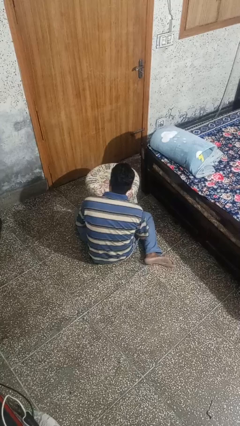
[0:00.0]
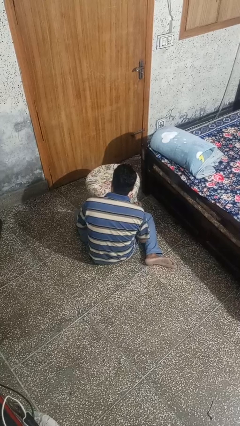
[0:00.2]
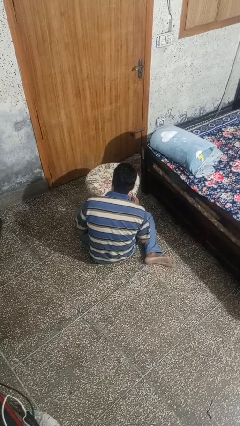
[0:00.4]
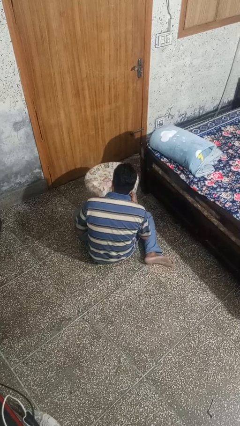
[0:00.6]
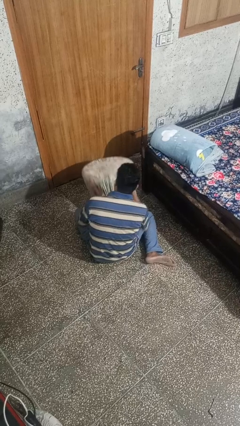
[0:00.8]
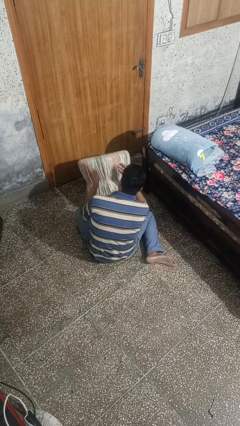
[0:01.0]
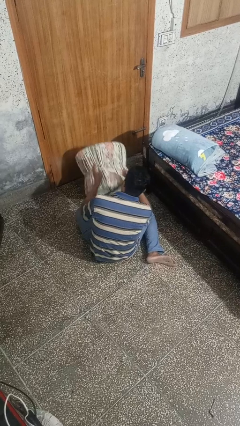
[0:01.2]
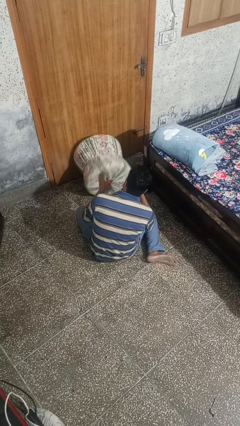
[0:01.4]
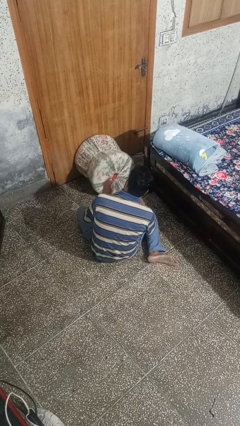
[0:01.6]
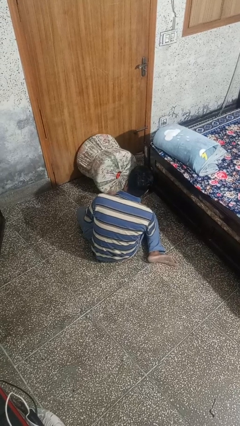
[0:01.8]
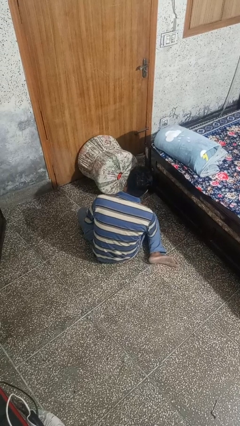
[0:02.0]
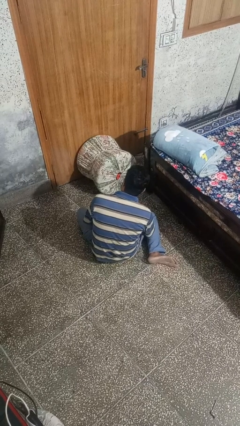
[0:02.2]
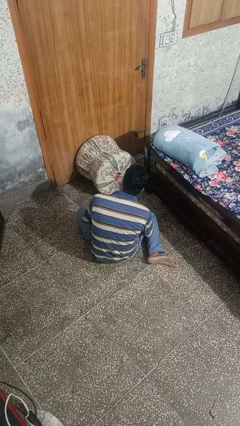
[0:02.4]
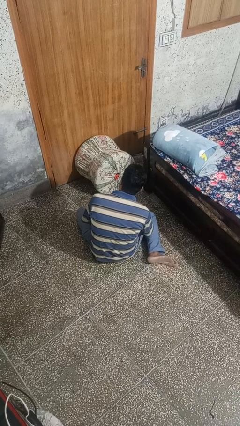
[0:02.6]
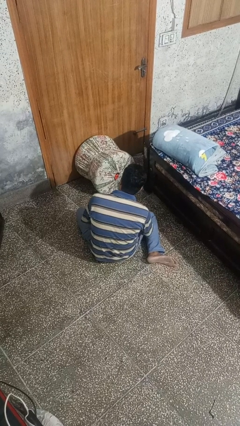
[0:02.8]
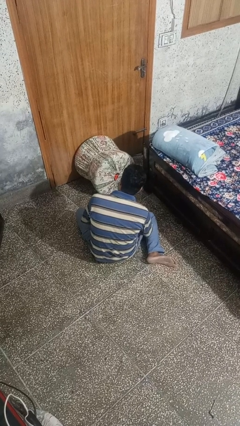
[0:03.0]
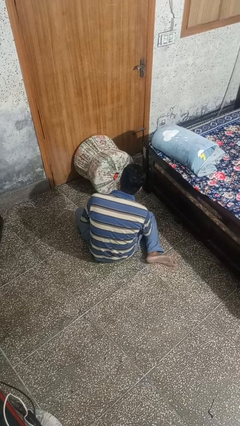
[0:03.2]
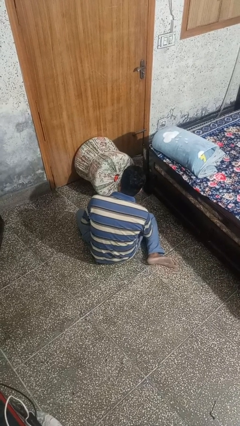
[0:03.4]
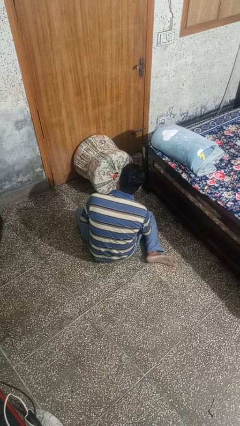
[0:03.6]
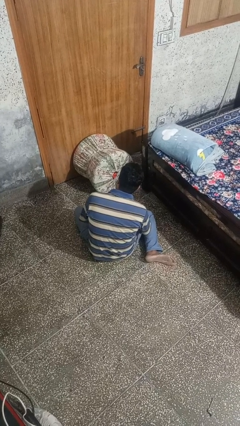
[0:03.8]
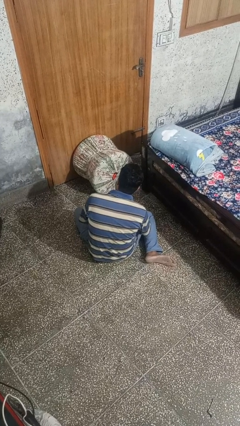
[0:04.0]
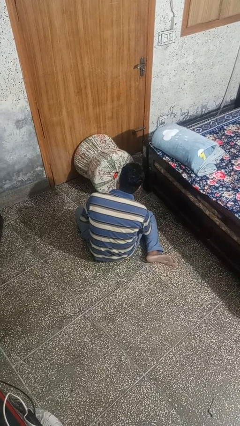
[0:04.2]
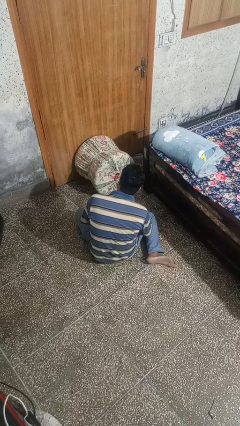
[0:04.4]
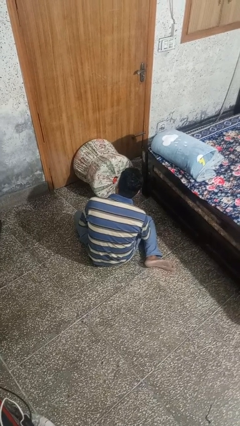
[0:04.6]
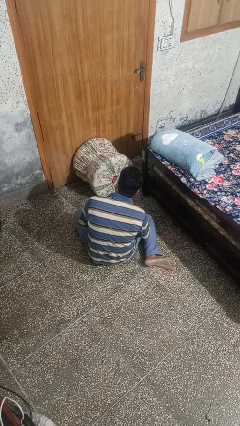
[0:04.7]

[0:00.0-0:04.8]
person knocks over furniture

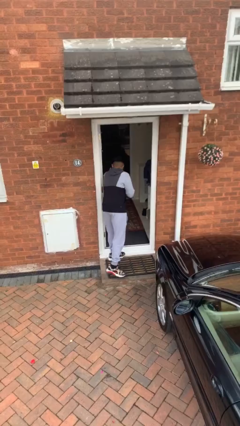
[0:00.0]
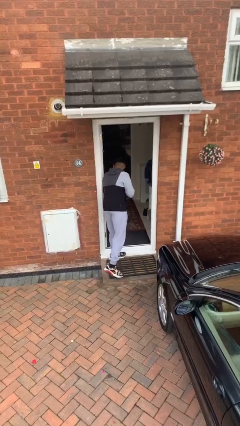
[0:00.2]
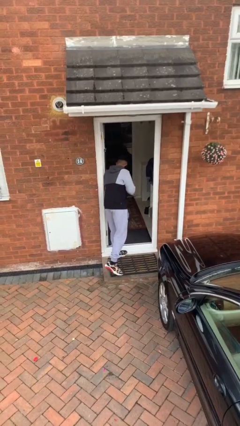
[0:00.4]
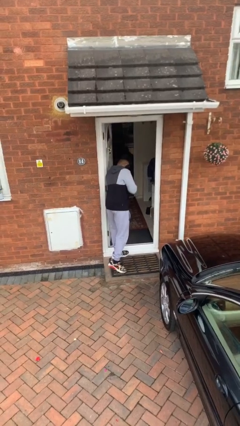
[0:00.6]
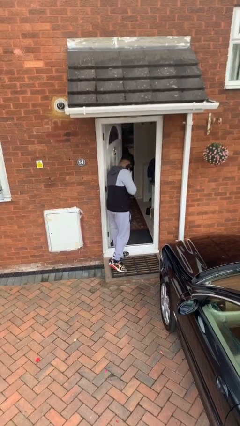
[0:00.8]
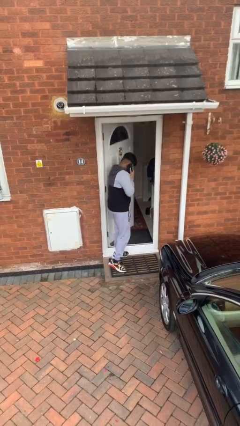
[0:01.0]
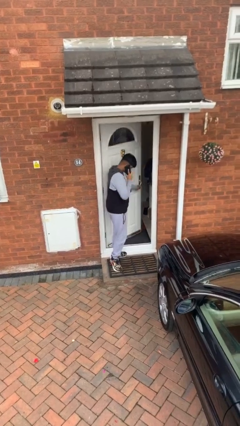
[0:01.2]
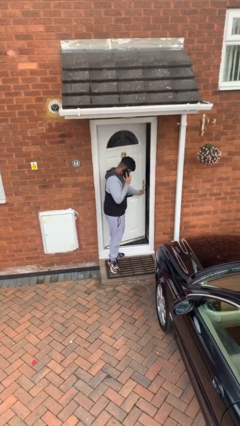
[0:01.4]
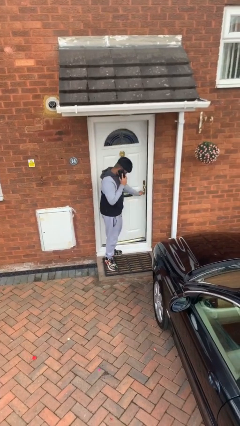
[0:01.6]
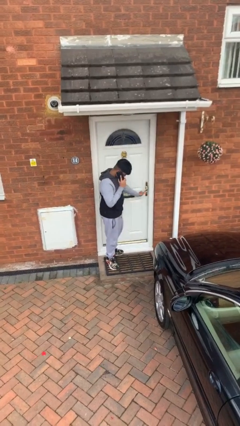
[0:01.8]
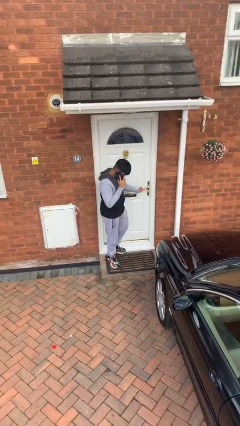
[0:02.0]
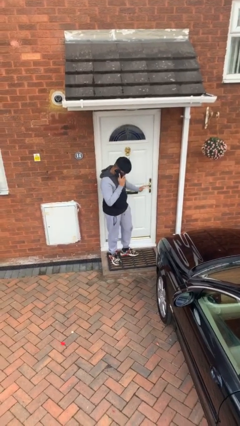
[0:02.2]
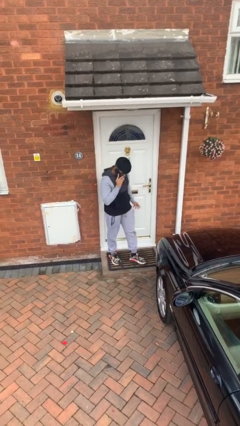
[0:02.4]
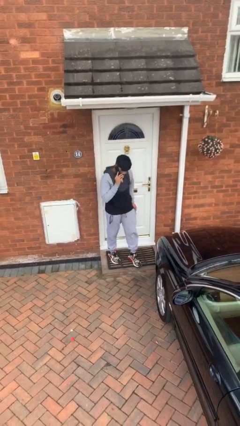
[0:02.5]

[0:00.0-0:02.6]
person closes facility door

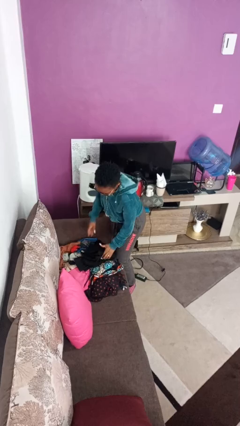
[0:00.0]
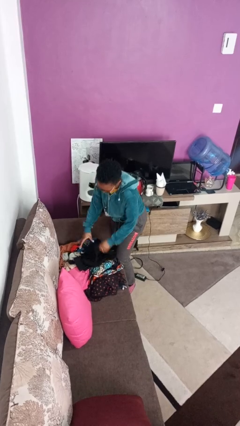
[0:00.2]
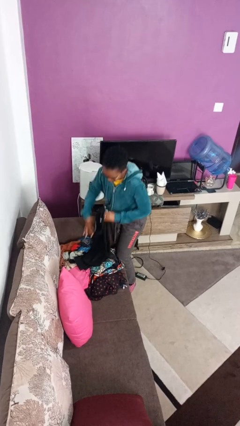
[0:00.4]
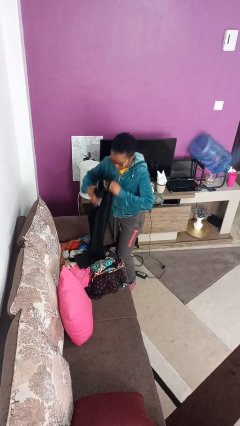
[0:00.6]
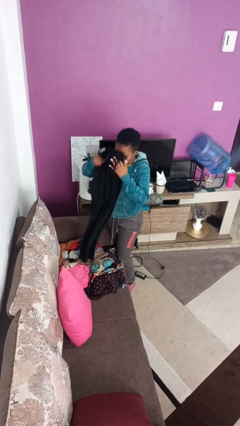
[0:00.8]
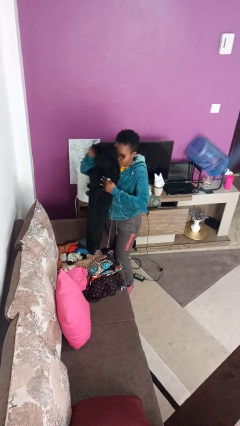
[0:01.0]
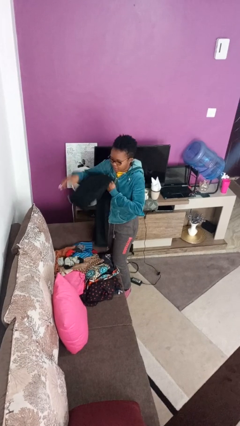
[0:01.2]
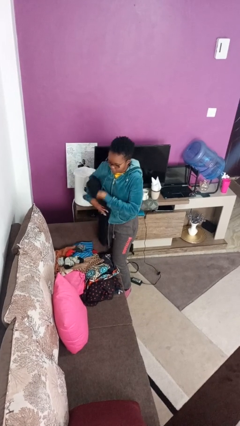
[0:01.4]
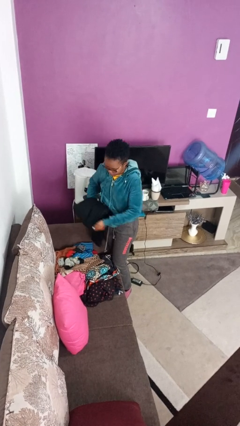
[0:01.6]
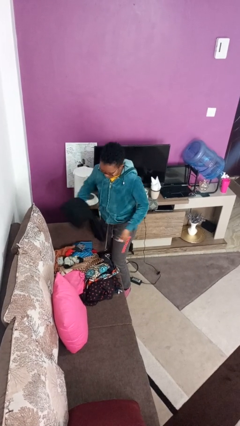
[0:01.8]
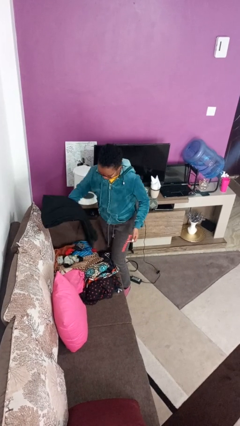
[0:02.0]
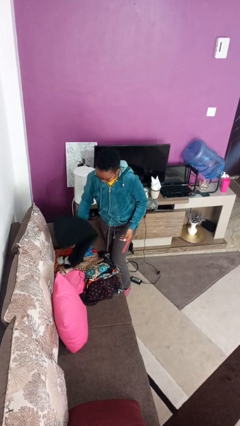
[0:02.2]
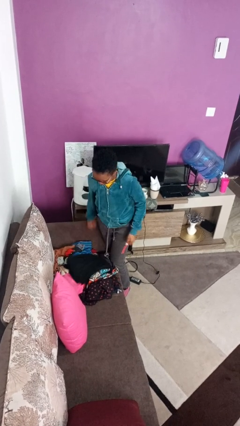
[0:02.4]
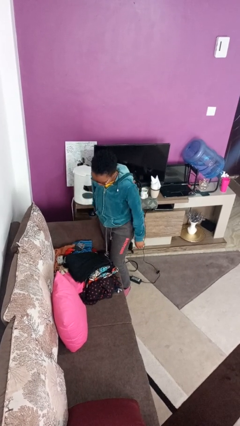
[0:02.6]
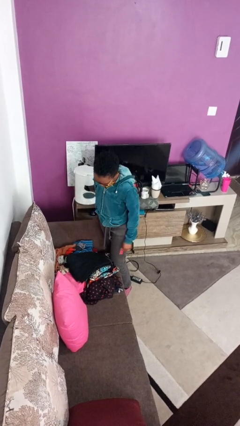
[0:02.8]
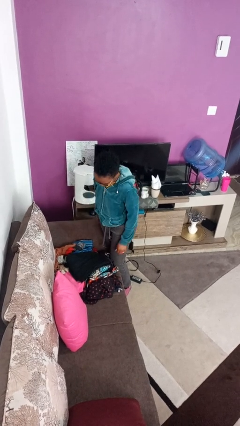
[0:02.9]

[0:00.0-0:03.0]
person folds pants

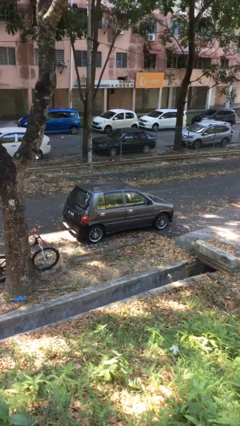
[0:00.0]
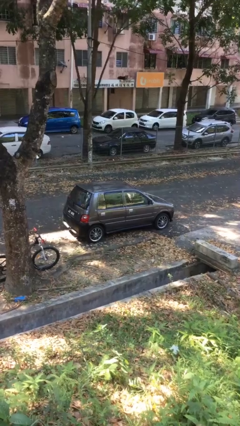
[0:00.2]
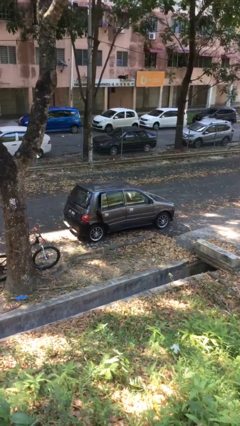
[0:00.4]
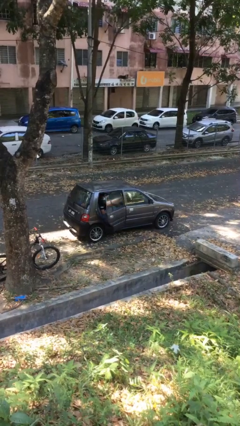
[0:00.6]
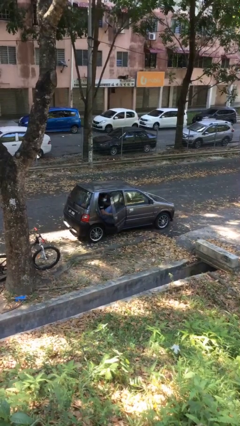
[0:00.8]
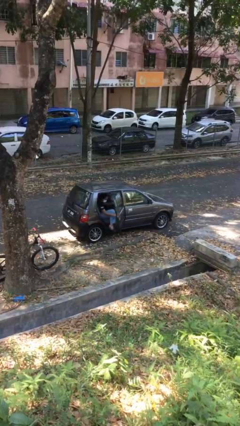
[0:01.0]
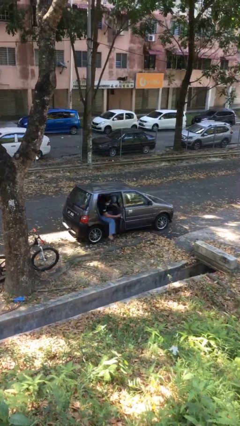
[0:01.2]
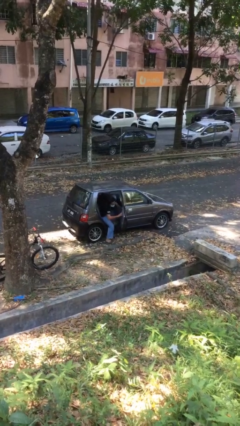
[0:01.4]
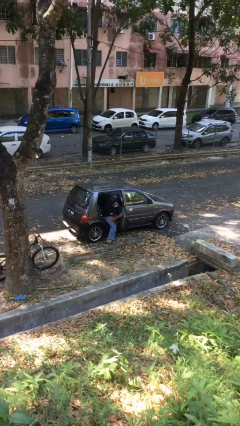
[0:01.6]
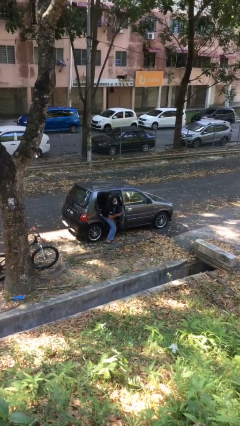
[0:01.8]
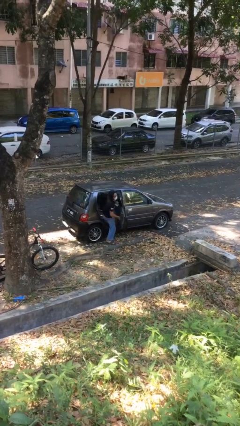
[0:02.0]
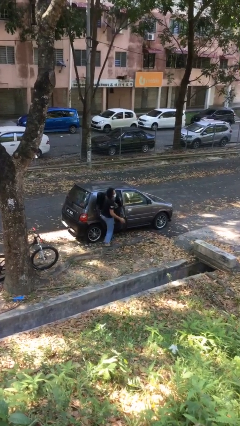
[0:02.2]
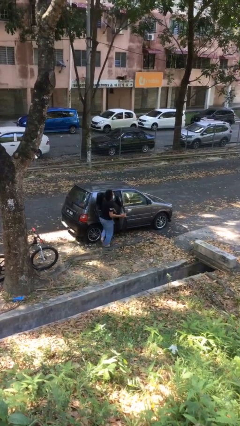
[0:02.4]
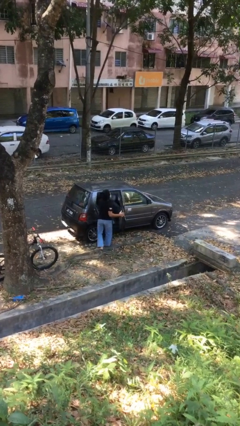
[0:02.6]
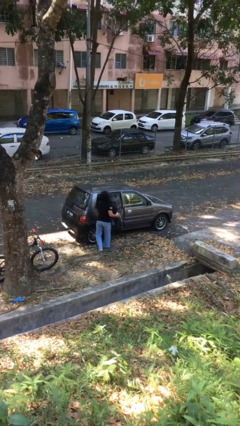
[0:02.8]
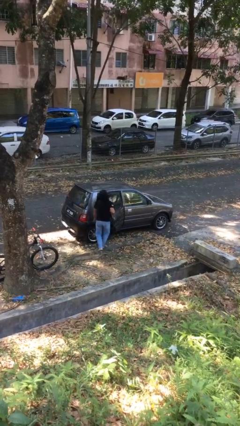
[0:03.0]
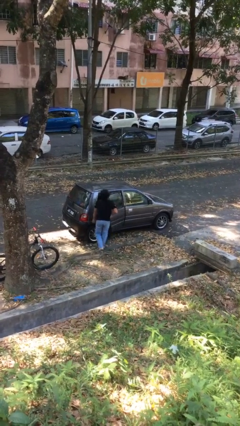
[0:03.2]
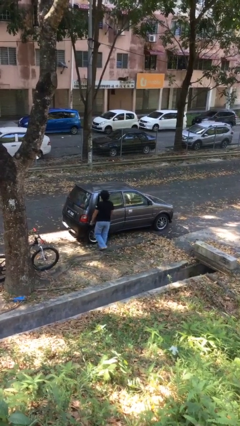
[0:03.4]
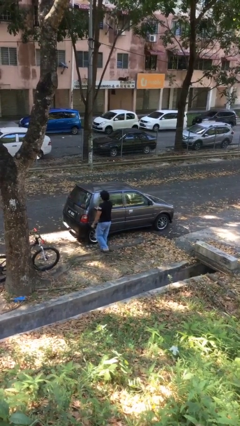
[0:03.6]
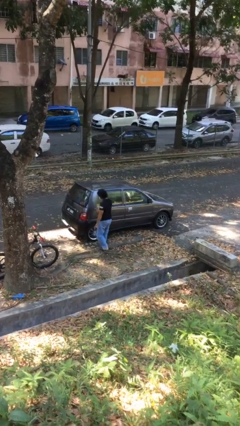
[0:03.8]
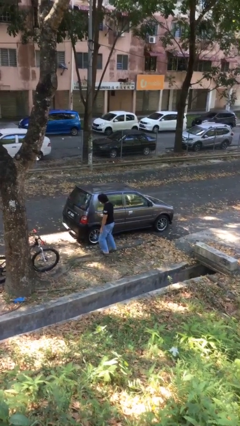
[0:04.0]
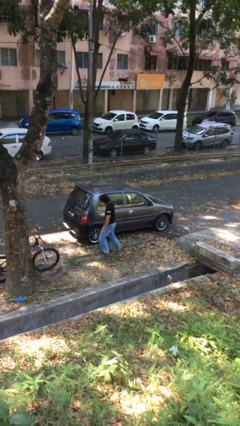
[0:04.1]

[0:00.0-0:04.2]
car drops off person

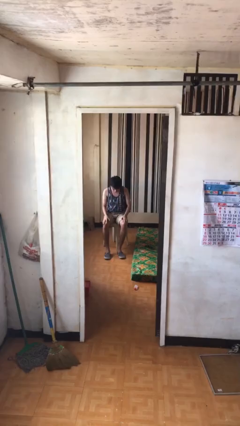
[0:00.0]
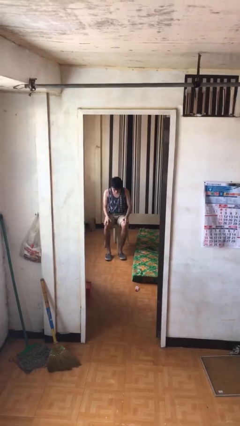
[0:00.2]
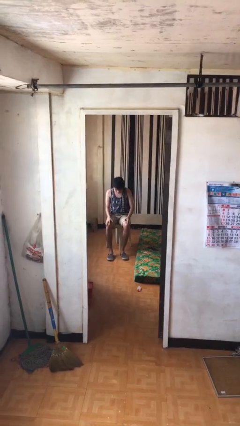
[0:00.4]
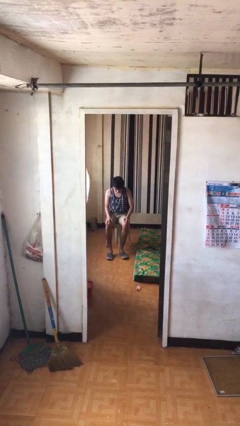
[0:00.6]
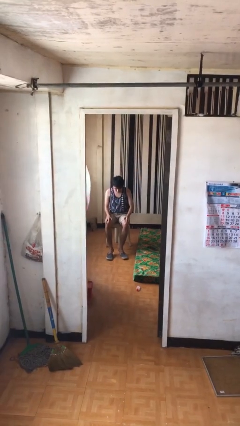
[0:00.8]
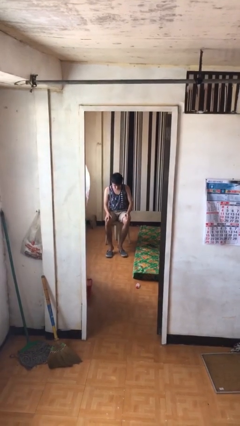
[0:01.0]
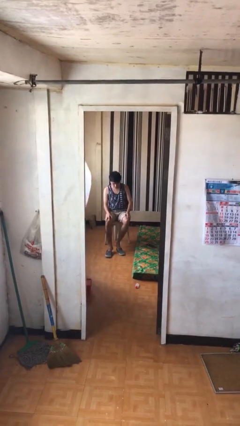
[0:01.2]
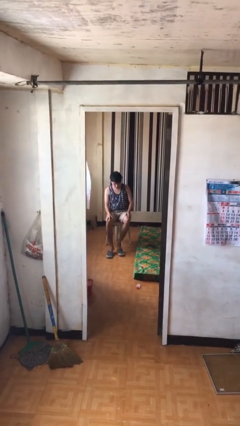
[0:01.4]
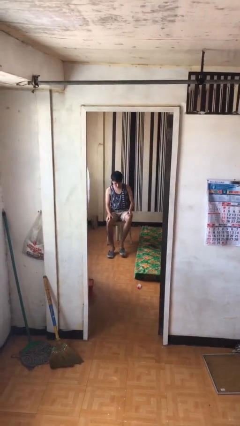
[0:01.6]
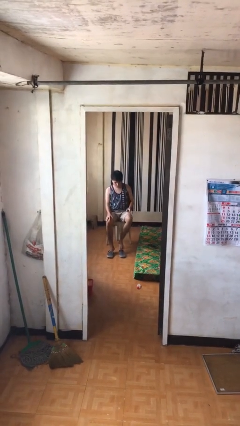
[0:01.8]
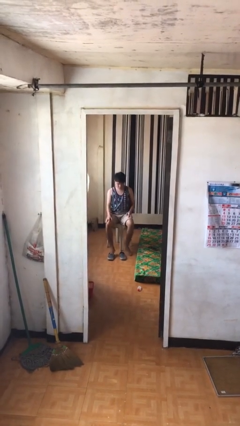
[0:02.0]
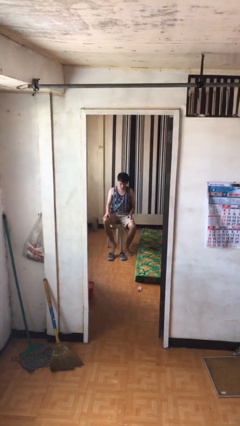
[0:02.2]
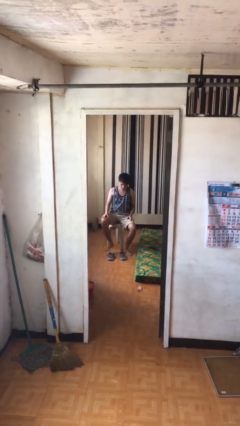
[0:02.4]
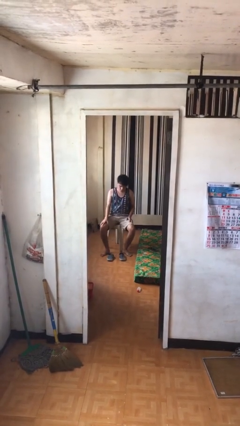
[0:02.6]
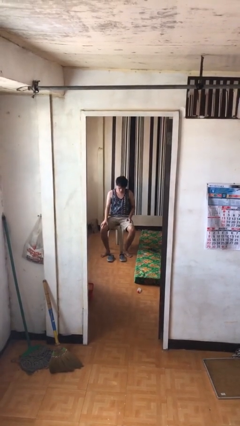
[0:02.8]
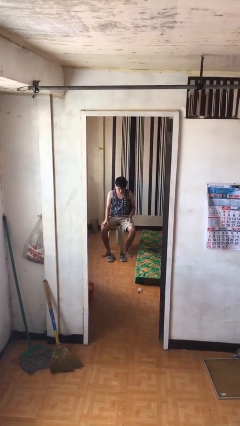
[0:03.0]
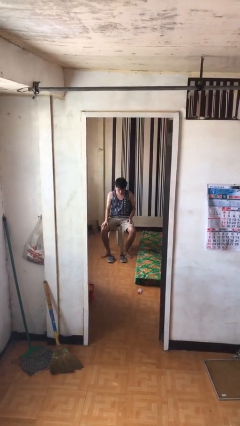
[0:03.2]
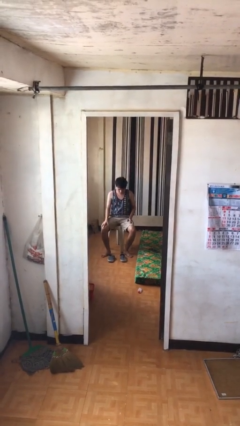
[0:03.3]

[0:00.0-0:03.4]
person takes off shoes
